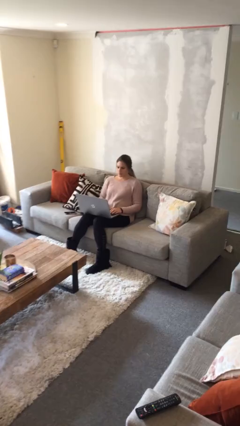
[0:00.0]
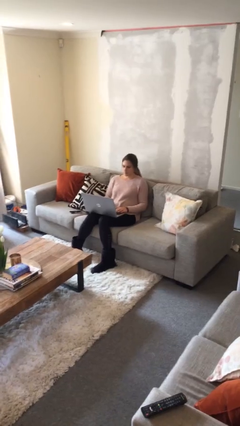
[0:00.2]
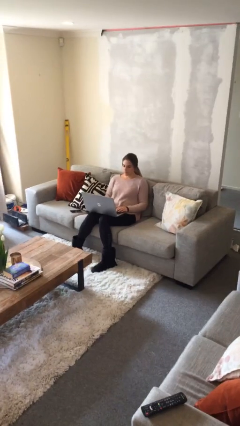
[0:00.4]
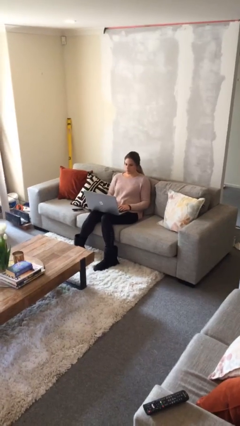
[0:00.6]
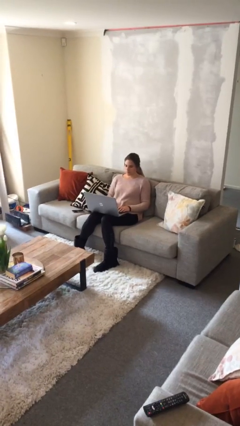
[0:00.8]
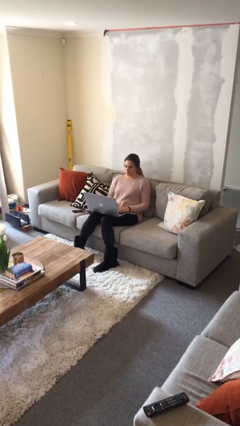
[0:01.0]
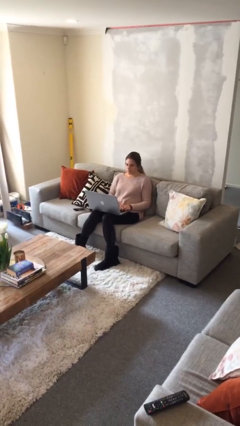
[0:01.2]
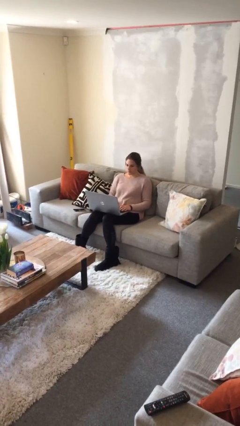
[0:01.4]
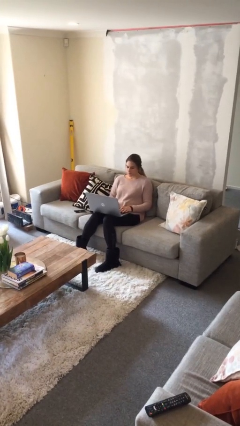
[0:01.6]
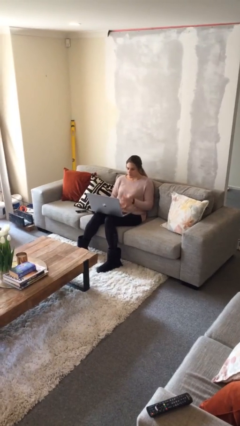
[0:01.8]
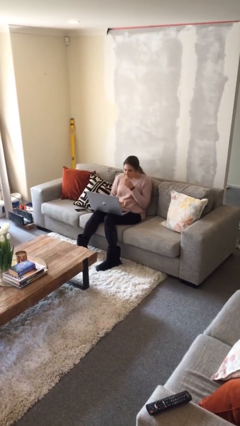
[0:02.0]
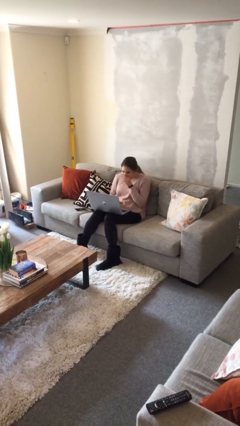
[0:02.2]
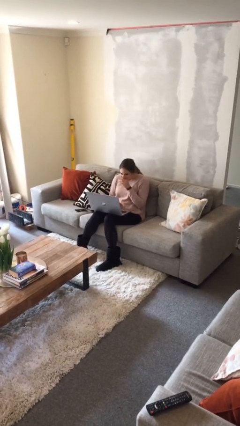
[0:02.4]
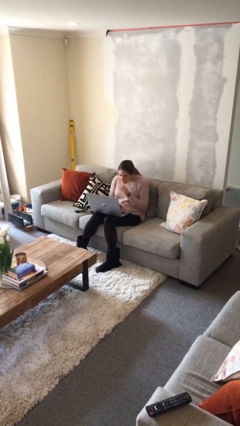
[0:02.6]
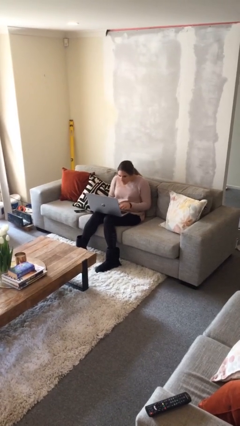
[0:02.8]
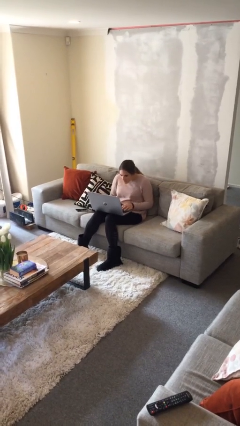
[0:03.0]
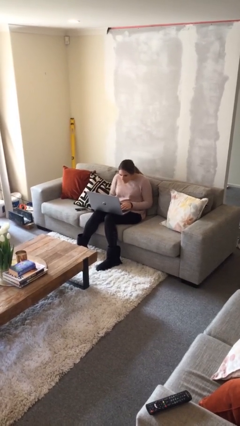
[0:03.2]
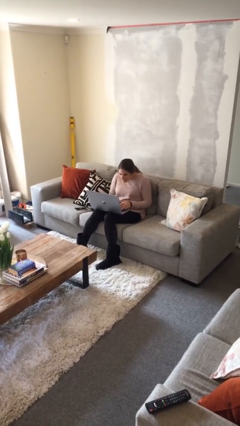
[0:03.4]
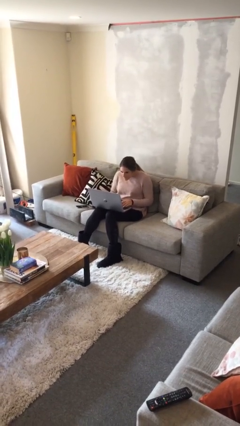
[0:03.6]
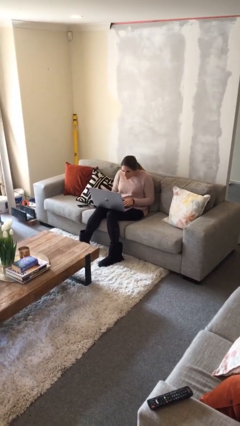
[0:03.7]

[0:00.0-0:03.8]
person interacts with laptop

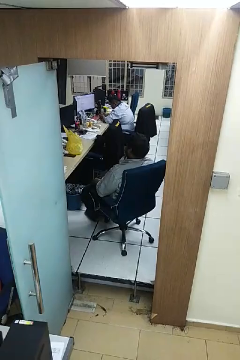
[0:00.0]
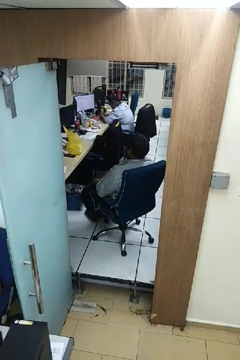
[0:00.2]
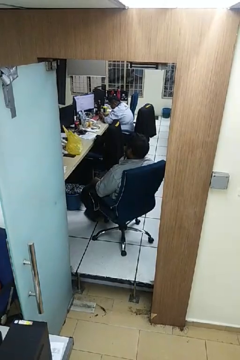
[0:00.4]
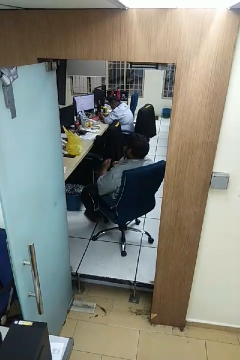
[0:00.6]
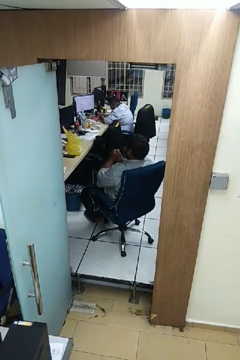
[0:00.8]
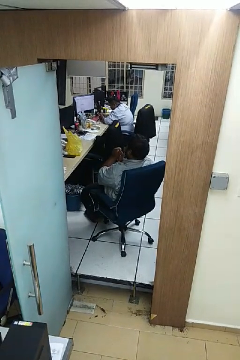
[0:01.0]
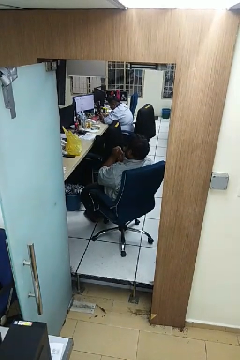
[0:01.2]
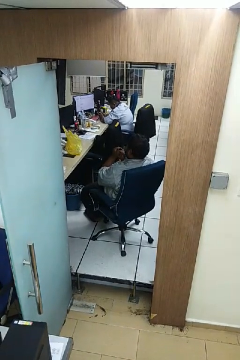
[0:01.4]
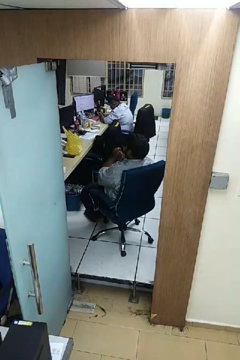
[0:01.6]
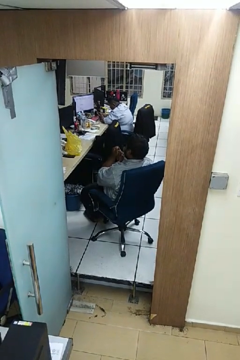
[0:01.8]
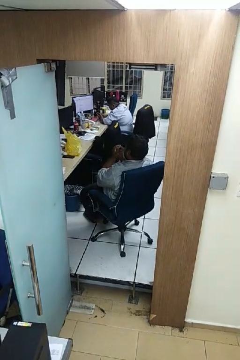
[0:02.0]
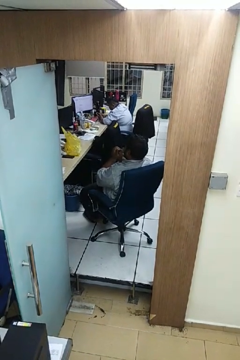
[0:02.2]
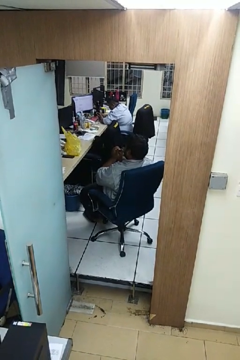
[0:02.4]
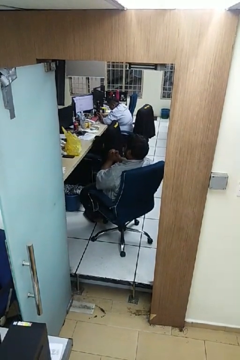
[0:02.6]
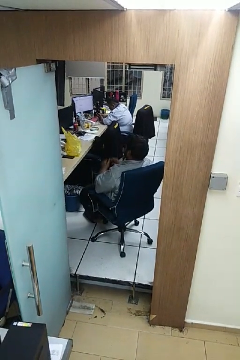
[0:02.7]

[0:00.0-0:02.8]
person cracks knuckles

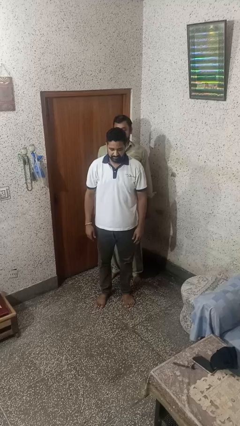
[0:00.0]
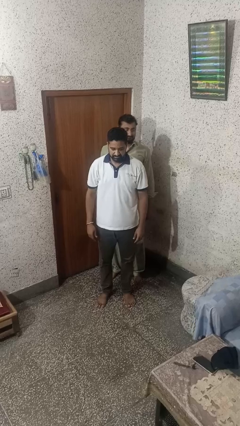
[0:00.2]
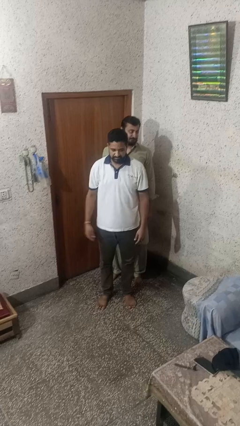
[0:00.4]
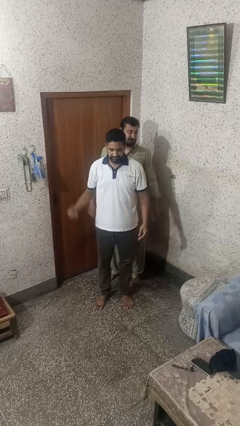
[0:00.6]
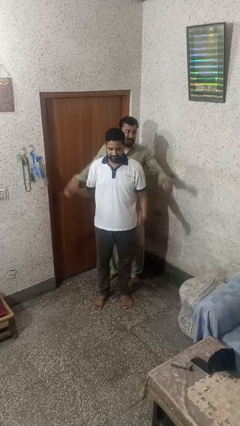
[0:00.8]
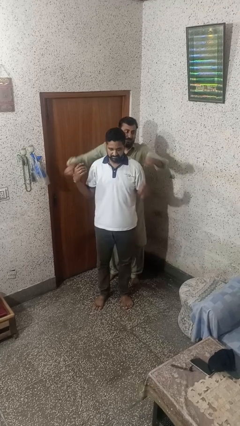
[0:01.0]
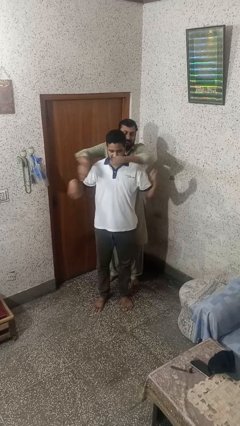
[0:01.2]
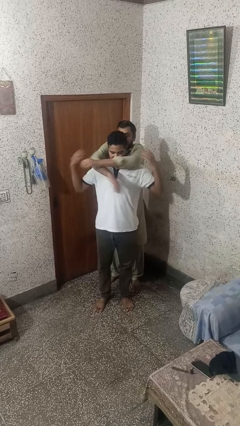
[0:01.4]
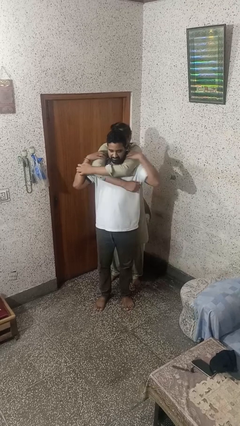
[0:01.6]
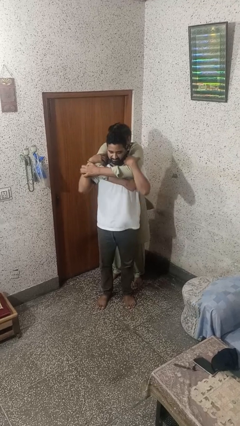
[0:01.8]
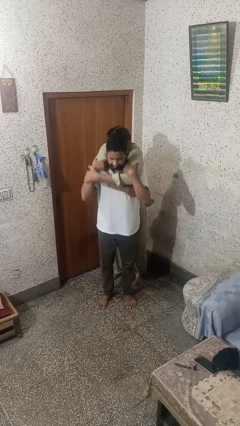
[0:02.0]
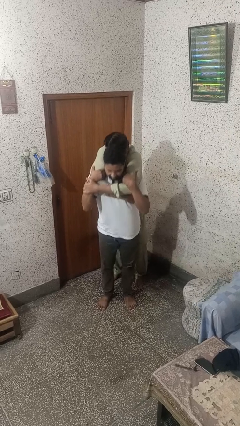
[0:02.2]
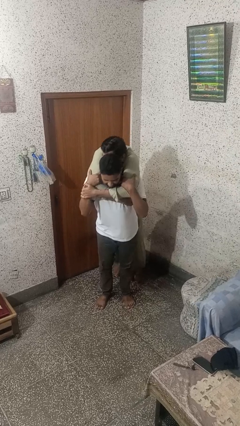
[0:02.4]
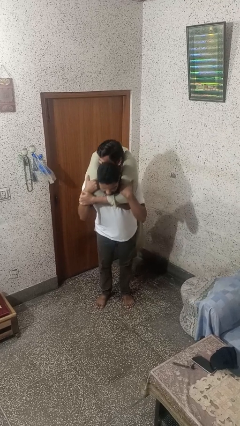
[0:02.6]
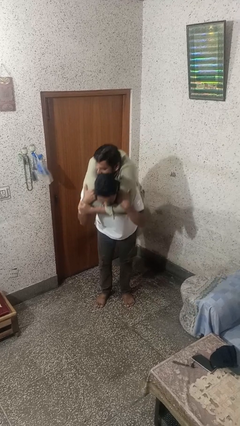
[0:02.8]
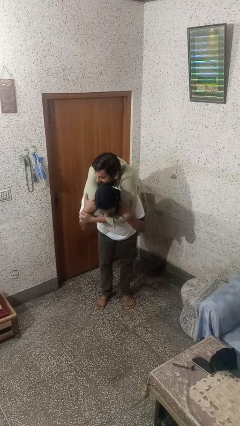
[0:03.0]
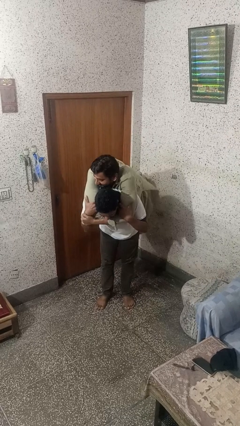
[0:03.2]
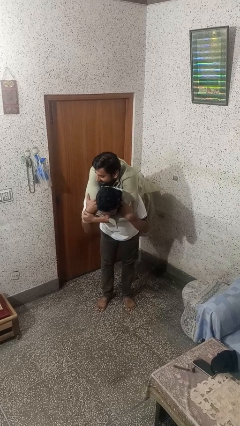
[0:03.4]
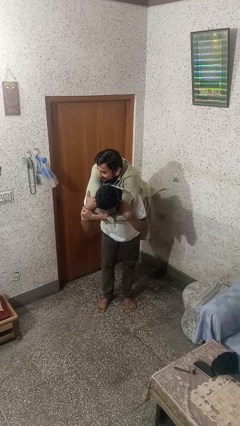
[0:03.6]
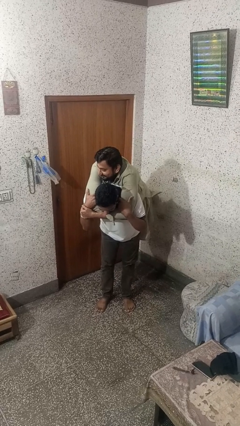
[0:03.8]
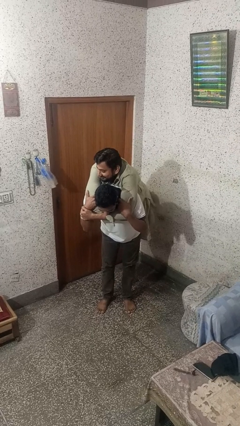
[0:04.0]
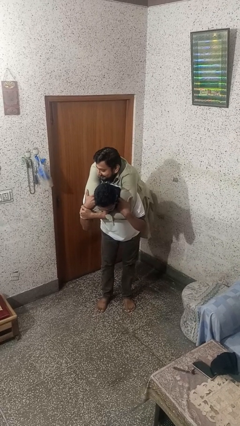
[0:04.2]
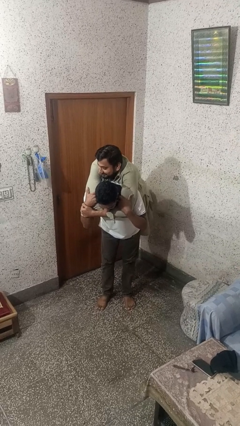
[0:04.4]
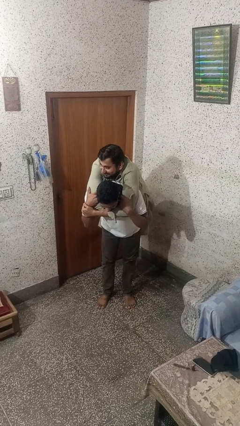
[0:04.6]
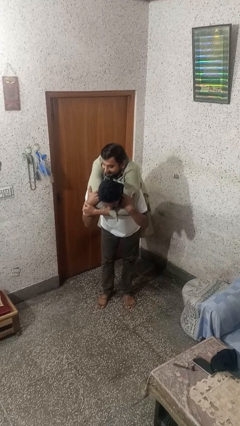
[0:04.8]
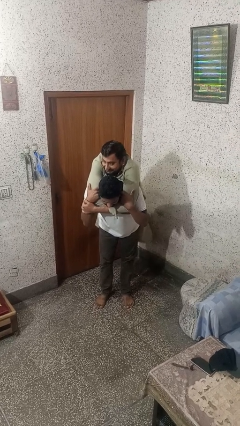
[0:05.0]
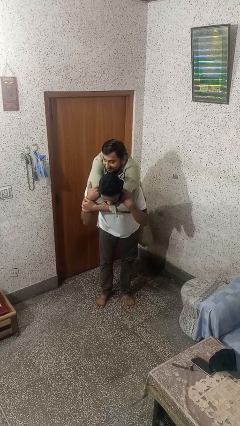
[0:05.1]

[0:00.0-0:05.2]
person carries person on back

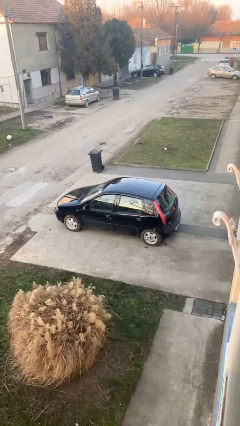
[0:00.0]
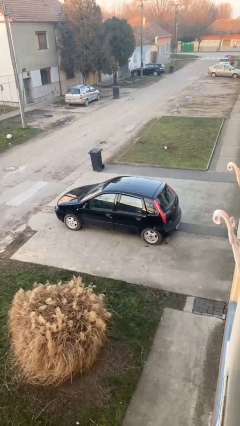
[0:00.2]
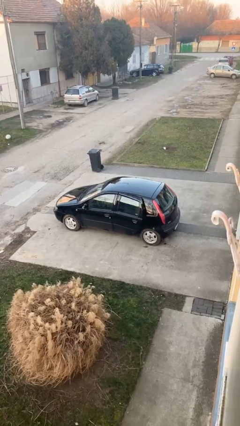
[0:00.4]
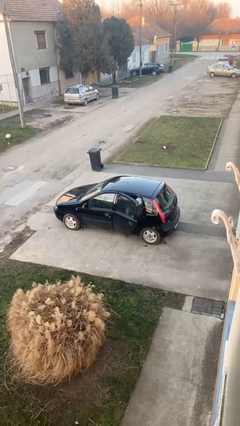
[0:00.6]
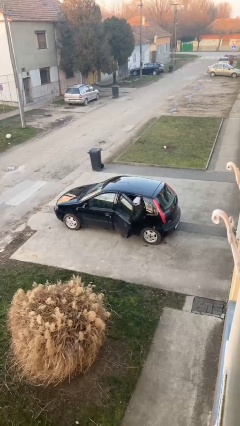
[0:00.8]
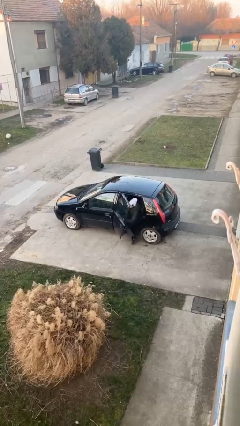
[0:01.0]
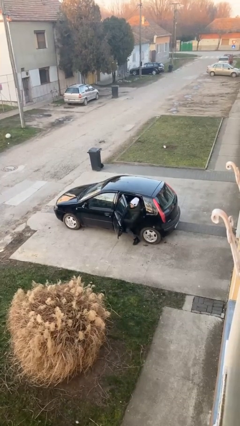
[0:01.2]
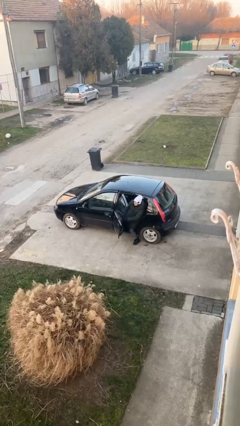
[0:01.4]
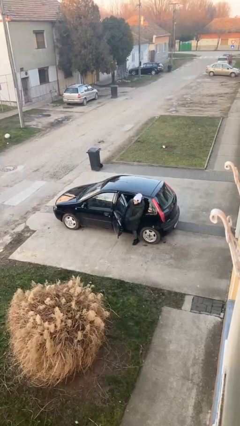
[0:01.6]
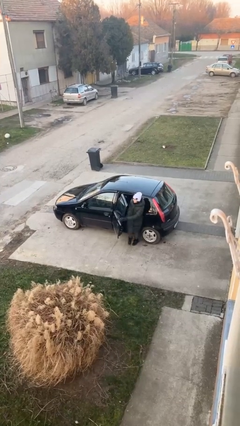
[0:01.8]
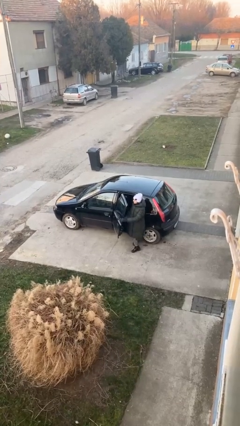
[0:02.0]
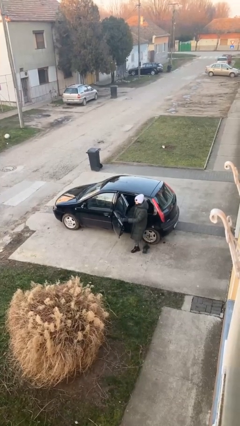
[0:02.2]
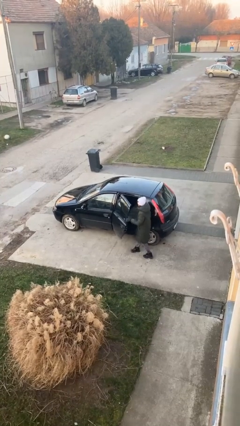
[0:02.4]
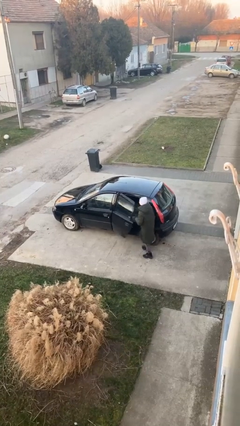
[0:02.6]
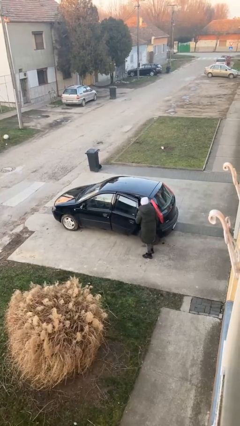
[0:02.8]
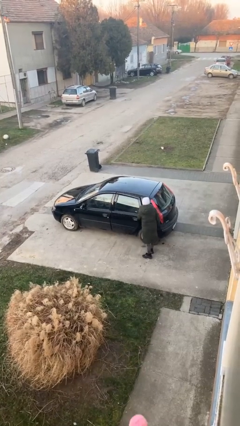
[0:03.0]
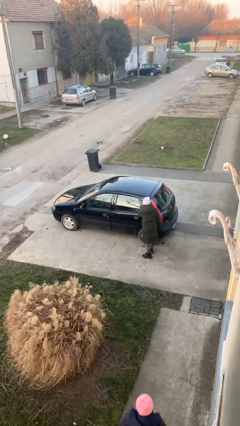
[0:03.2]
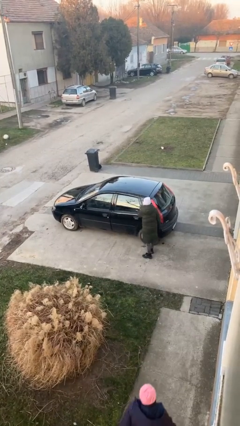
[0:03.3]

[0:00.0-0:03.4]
car drops off person

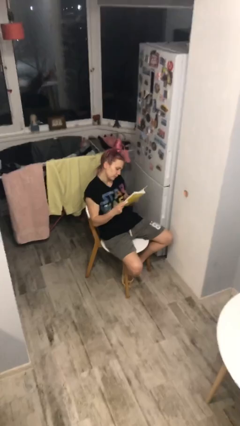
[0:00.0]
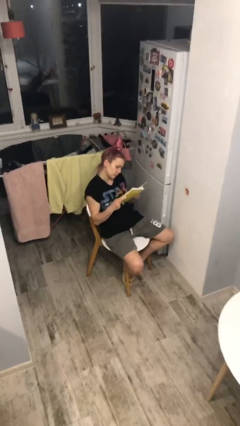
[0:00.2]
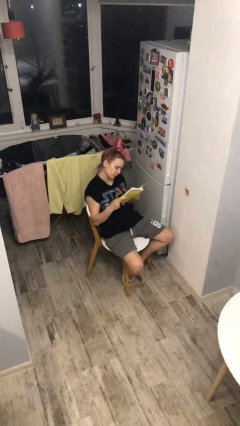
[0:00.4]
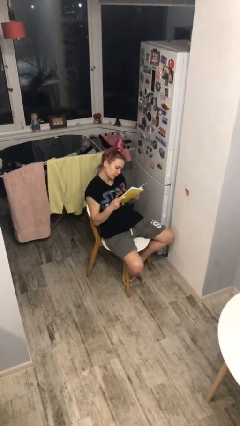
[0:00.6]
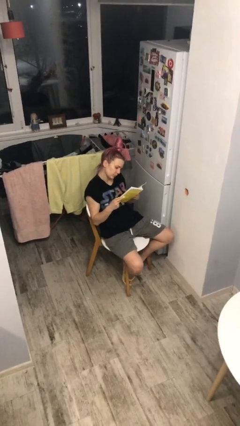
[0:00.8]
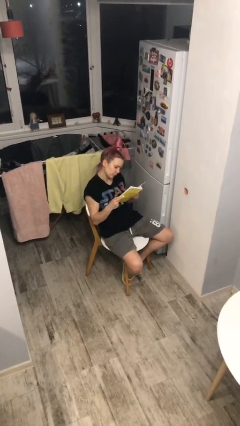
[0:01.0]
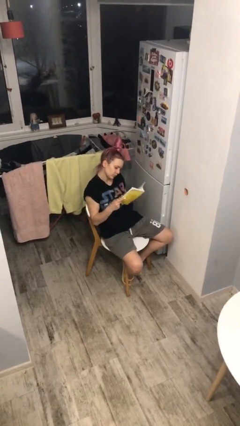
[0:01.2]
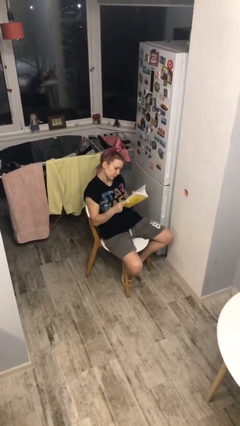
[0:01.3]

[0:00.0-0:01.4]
person reads document

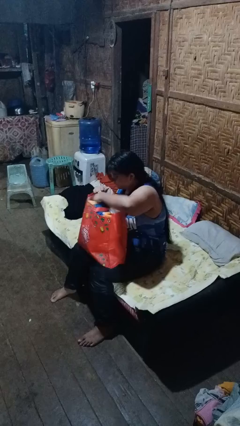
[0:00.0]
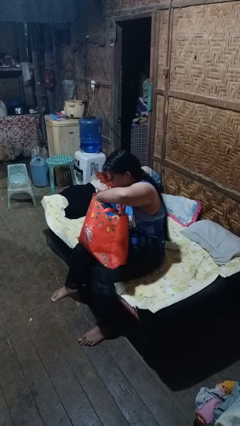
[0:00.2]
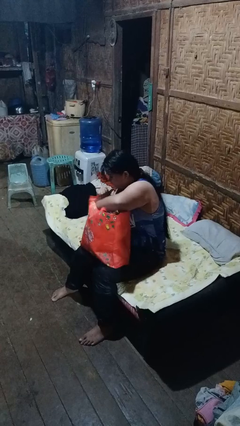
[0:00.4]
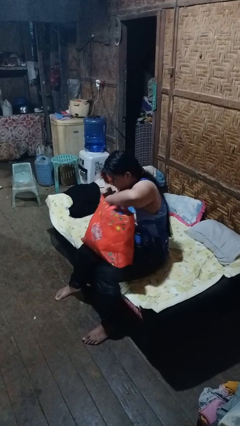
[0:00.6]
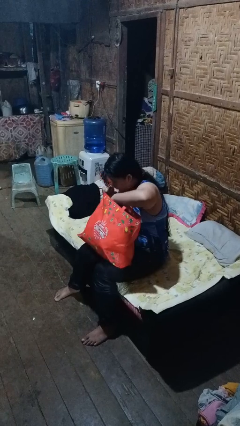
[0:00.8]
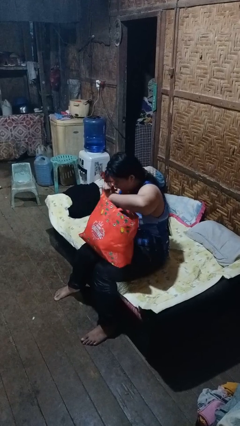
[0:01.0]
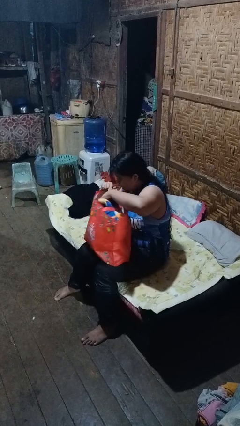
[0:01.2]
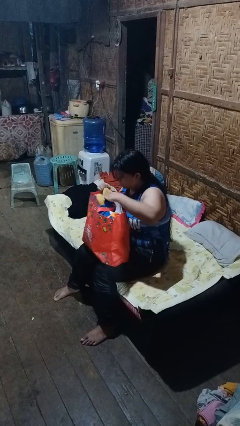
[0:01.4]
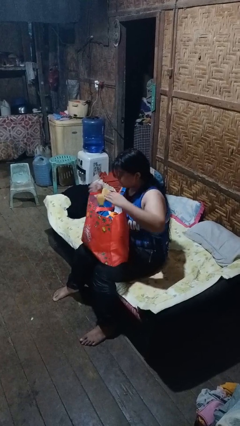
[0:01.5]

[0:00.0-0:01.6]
person searches in bag
